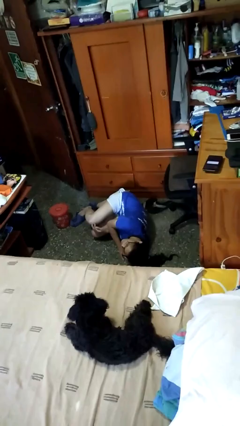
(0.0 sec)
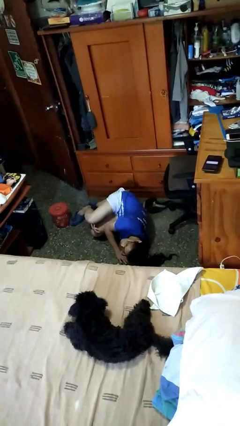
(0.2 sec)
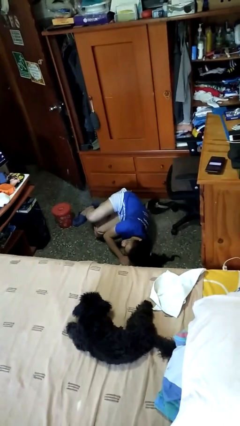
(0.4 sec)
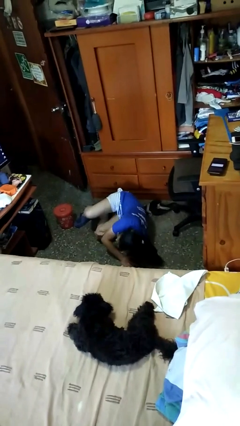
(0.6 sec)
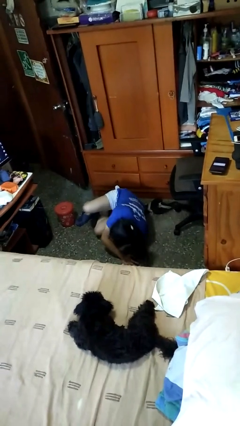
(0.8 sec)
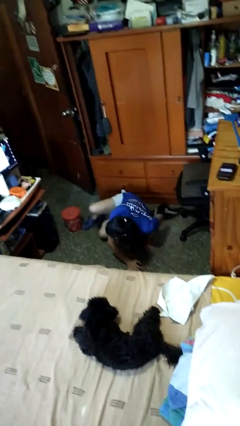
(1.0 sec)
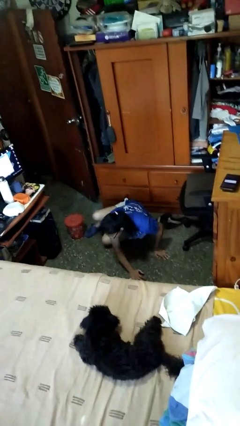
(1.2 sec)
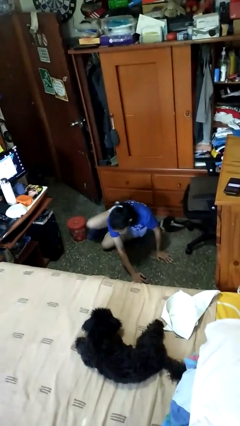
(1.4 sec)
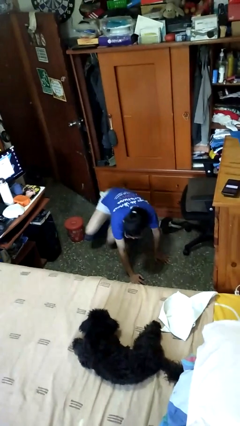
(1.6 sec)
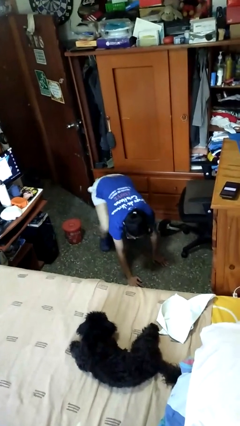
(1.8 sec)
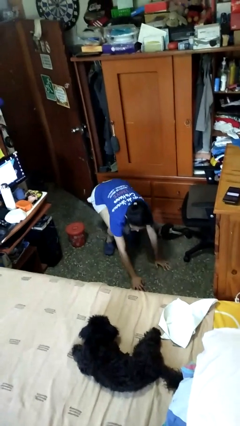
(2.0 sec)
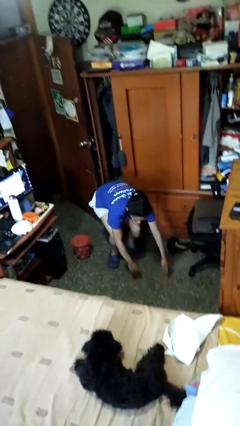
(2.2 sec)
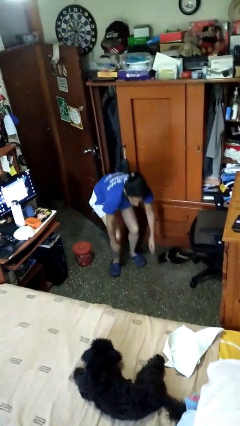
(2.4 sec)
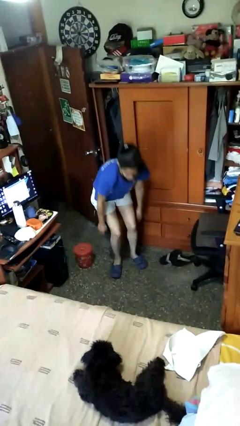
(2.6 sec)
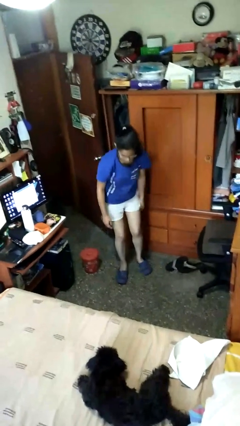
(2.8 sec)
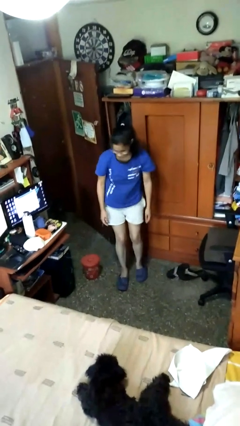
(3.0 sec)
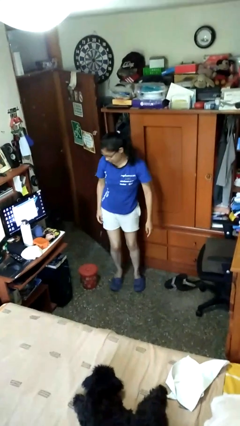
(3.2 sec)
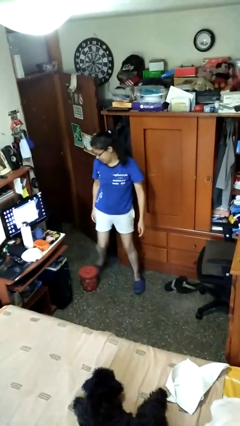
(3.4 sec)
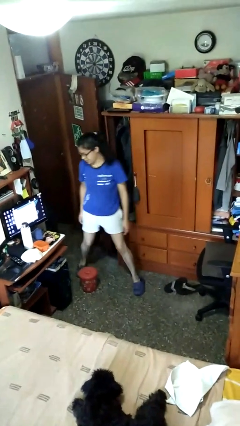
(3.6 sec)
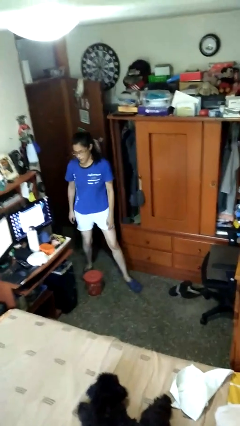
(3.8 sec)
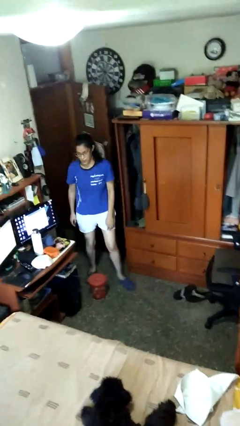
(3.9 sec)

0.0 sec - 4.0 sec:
person stands up from floor

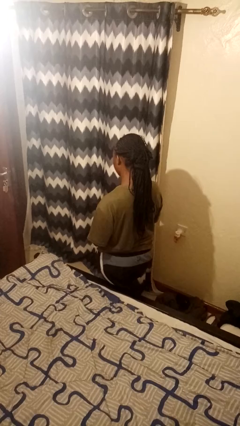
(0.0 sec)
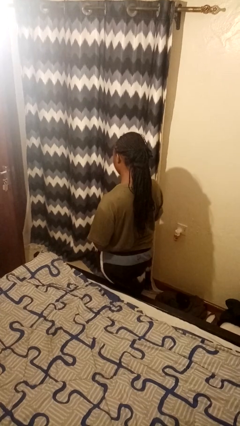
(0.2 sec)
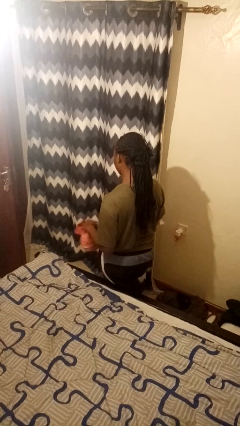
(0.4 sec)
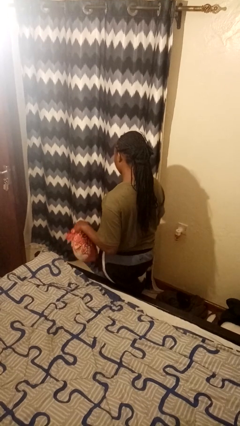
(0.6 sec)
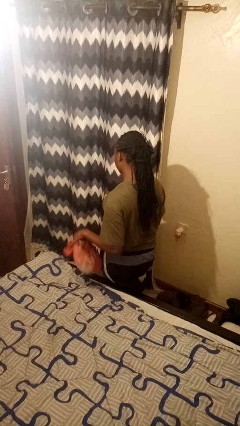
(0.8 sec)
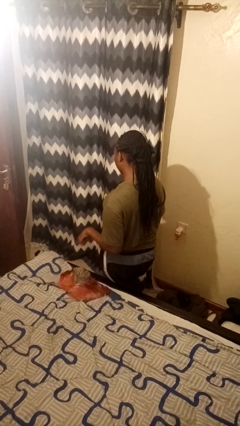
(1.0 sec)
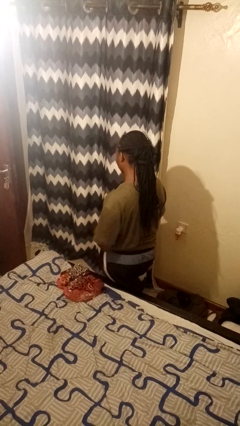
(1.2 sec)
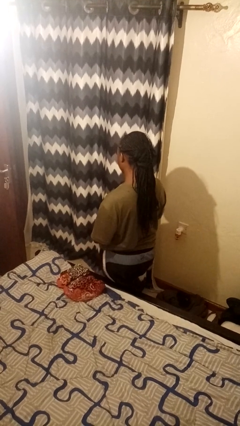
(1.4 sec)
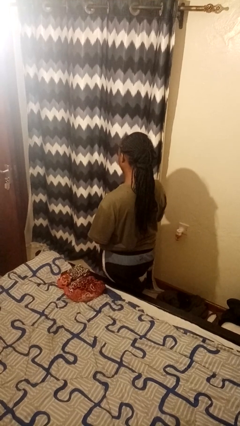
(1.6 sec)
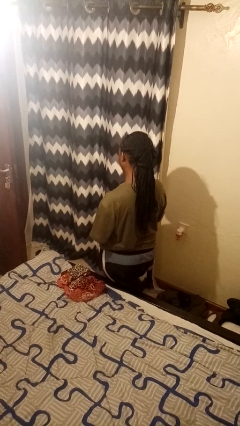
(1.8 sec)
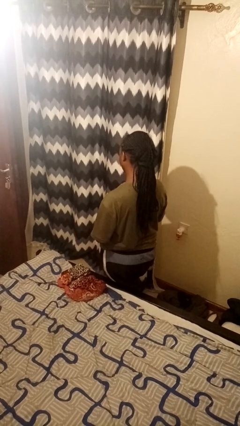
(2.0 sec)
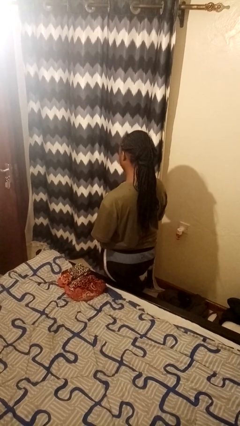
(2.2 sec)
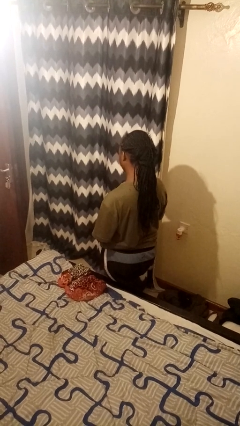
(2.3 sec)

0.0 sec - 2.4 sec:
person throws object on bed

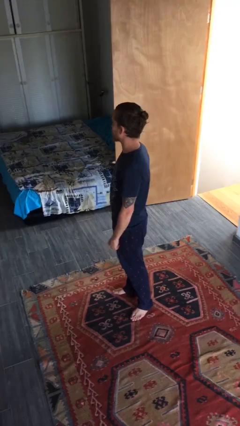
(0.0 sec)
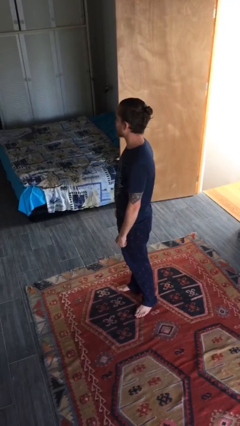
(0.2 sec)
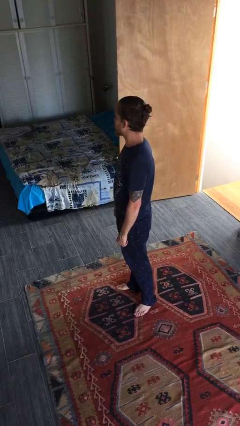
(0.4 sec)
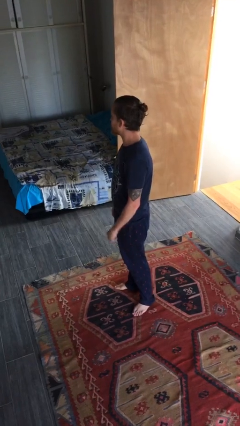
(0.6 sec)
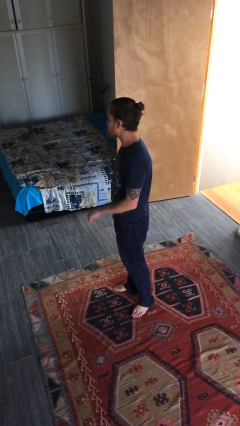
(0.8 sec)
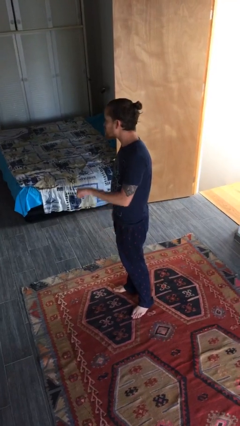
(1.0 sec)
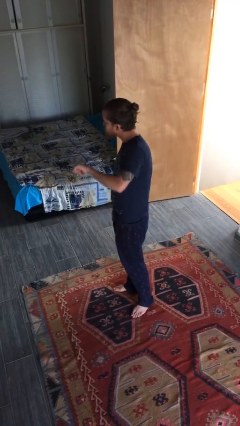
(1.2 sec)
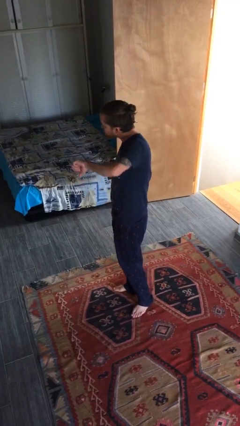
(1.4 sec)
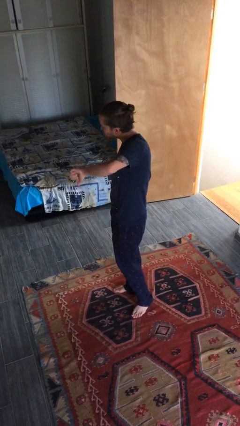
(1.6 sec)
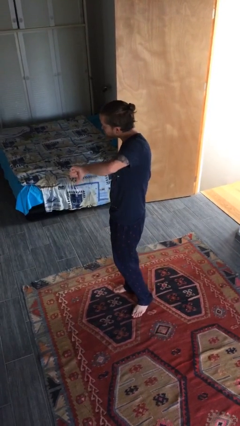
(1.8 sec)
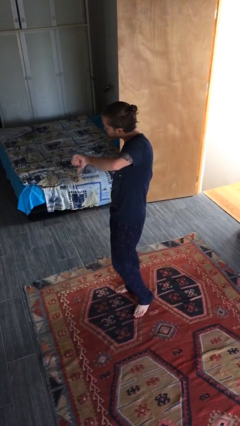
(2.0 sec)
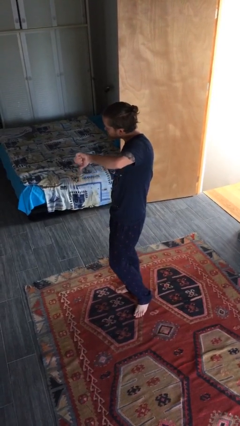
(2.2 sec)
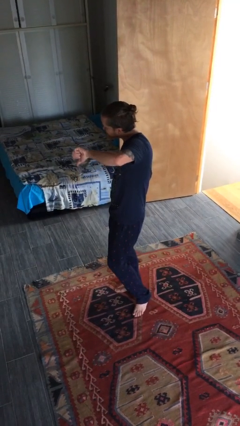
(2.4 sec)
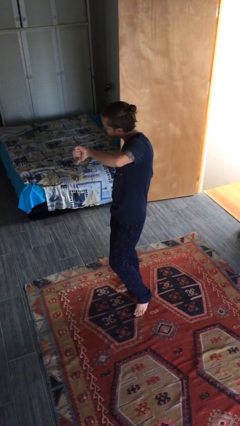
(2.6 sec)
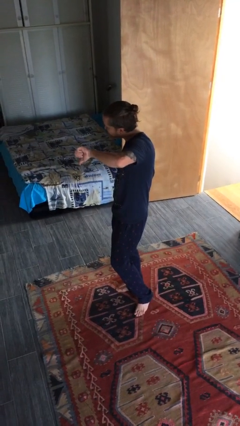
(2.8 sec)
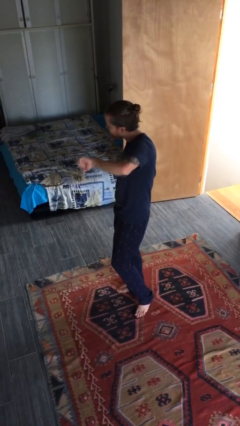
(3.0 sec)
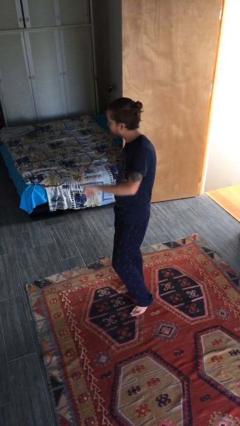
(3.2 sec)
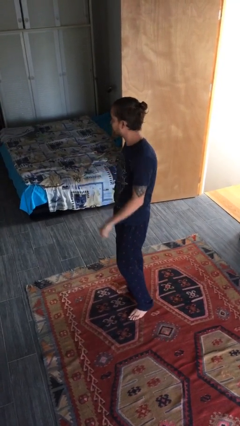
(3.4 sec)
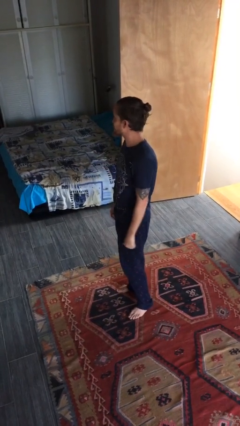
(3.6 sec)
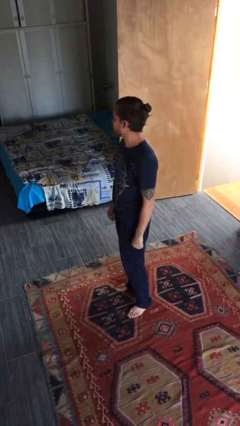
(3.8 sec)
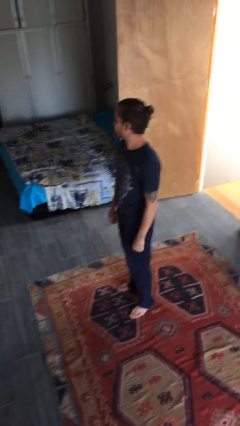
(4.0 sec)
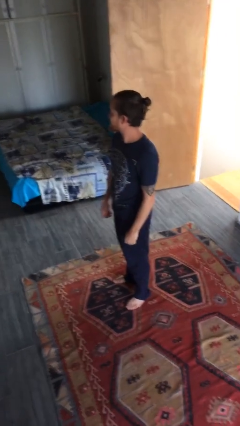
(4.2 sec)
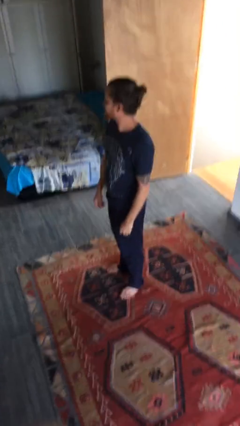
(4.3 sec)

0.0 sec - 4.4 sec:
person gestures thumbs down

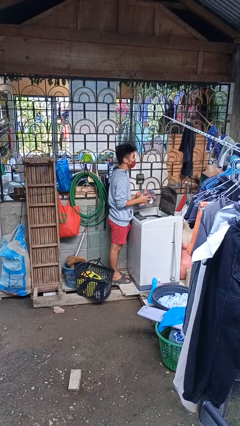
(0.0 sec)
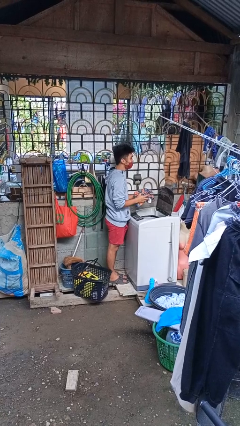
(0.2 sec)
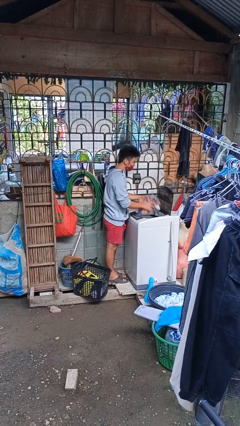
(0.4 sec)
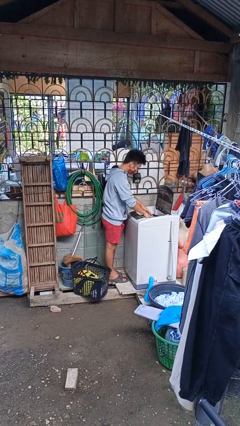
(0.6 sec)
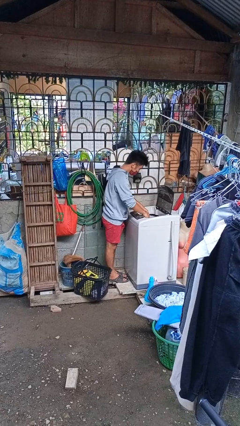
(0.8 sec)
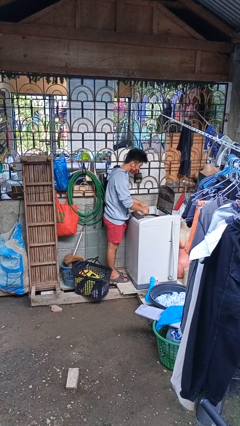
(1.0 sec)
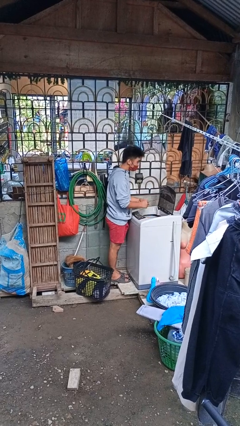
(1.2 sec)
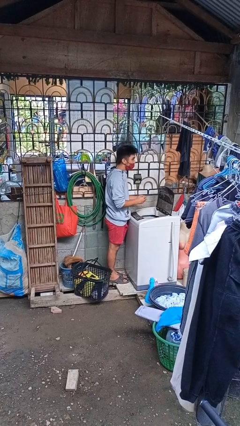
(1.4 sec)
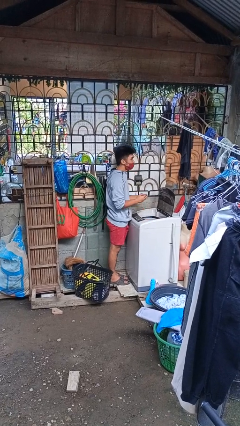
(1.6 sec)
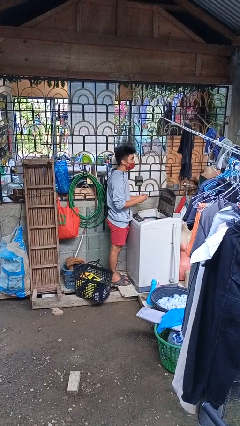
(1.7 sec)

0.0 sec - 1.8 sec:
person loads dryer

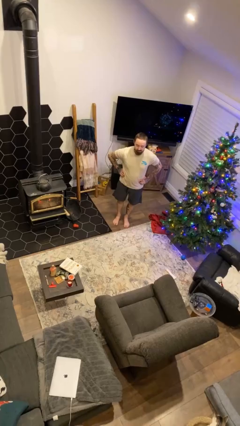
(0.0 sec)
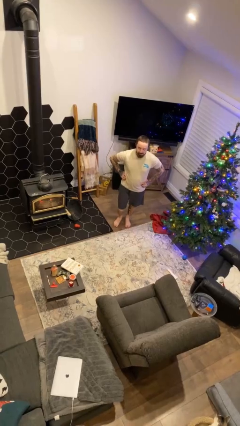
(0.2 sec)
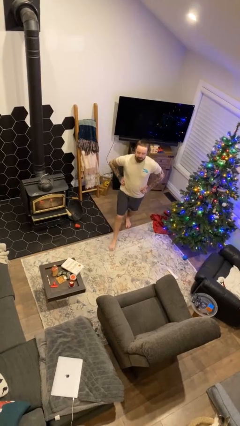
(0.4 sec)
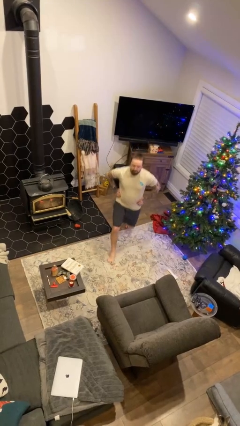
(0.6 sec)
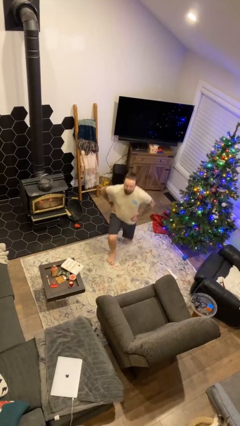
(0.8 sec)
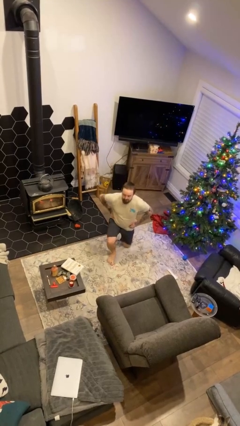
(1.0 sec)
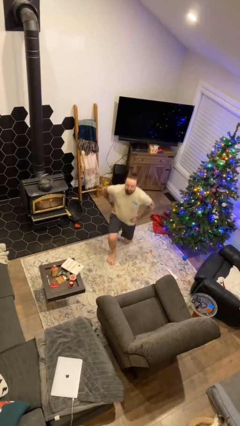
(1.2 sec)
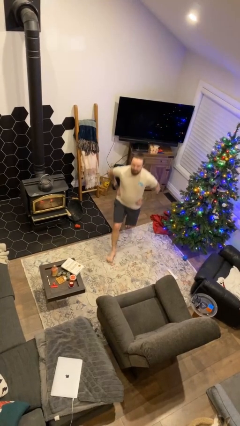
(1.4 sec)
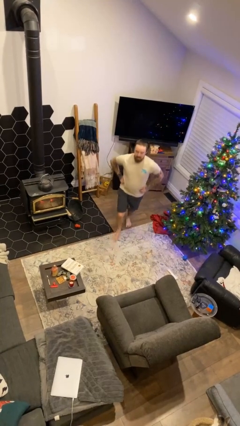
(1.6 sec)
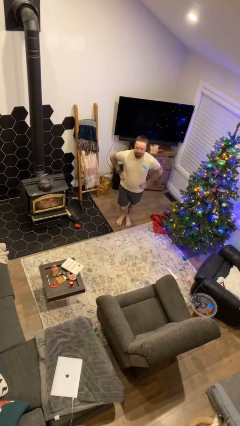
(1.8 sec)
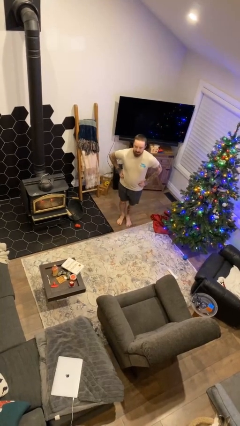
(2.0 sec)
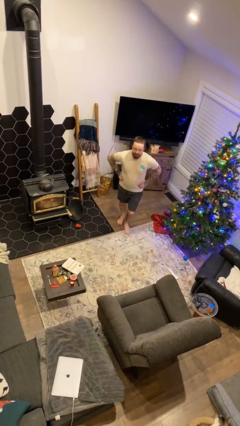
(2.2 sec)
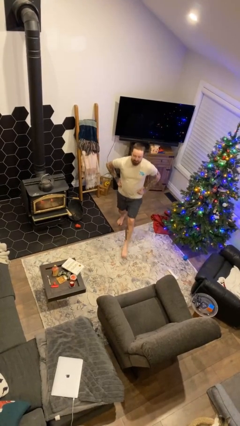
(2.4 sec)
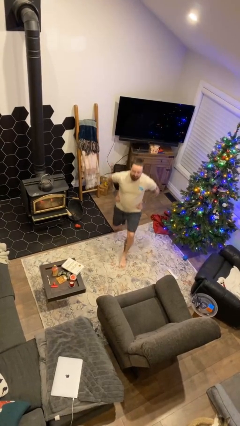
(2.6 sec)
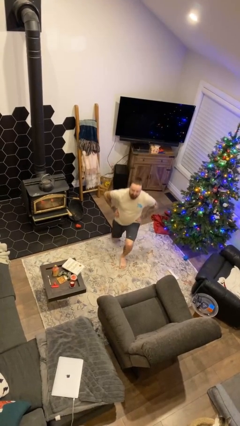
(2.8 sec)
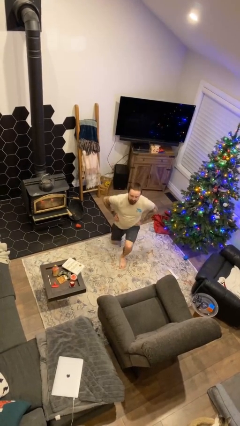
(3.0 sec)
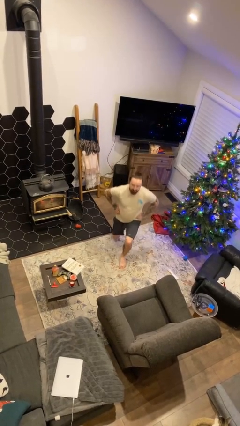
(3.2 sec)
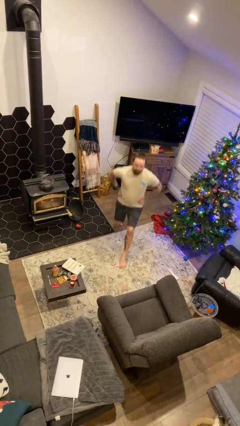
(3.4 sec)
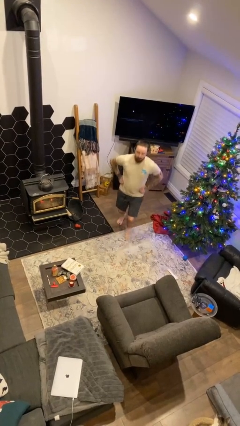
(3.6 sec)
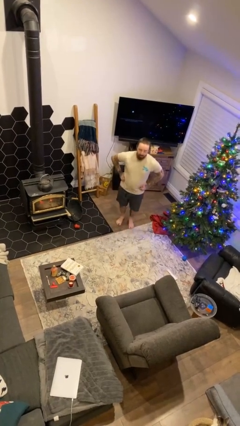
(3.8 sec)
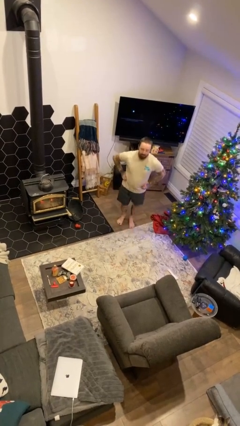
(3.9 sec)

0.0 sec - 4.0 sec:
person exercises with lunges

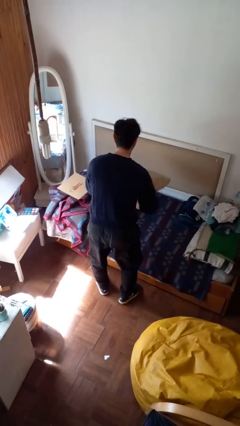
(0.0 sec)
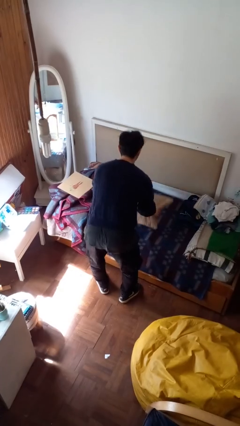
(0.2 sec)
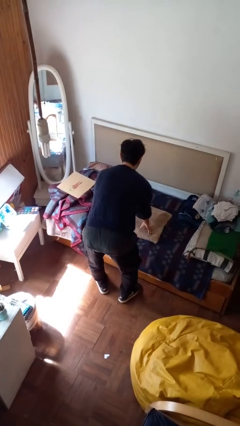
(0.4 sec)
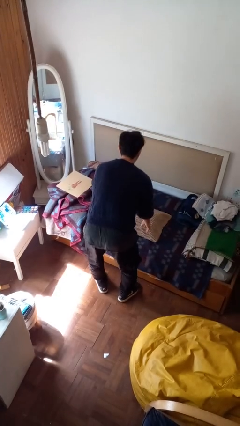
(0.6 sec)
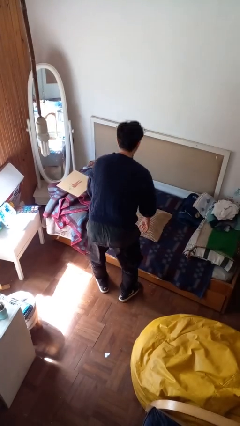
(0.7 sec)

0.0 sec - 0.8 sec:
person puts down object on bed
